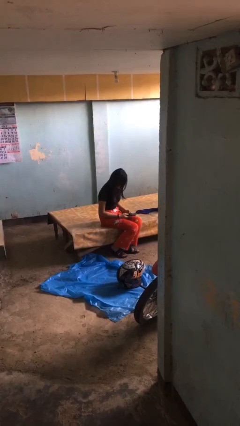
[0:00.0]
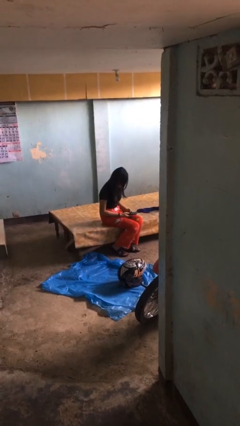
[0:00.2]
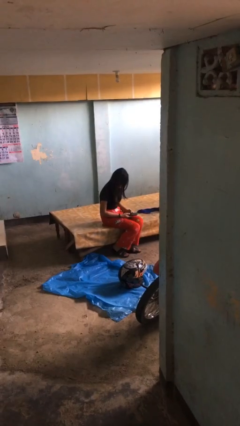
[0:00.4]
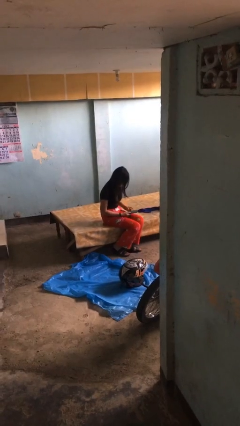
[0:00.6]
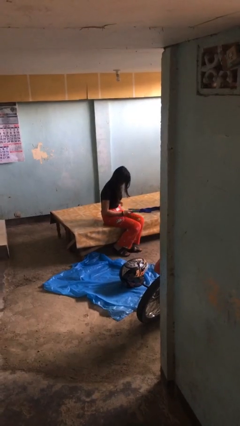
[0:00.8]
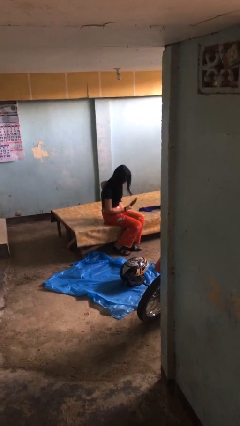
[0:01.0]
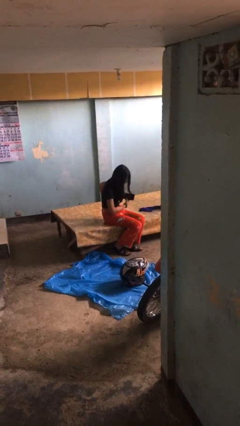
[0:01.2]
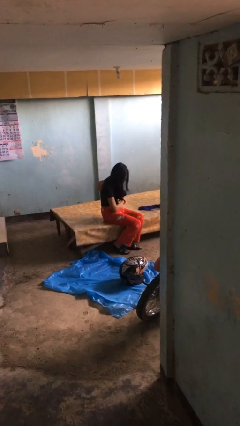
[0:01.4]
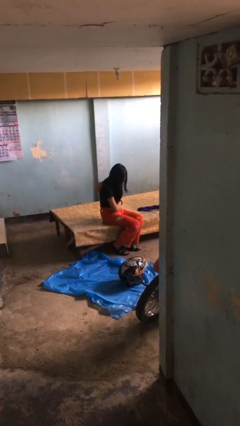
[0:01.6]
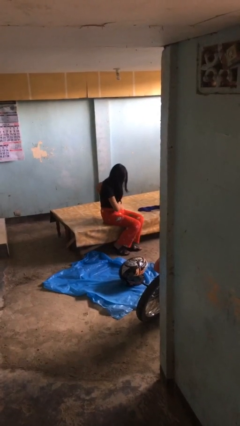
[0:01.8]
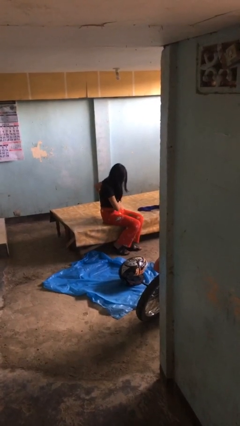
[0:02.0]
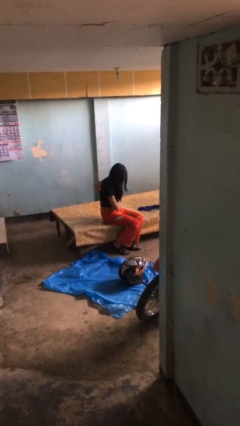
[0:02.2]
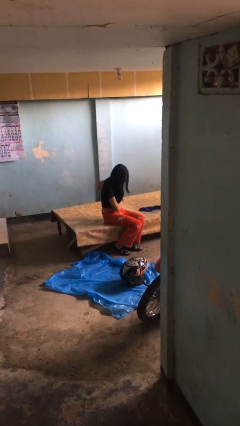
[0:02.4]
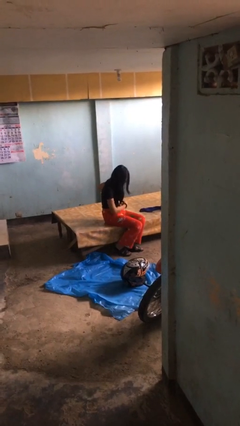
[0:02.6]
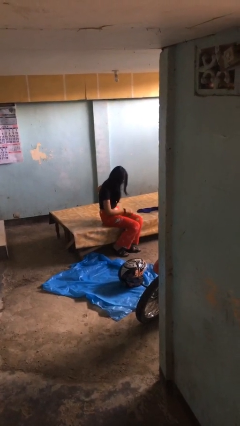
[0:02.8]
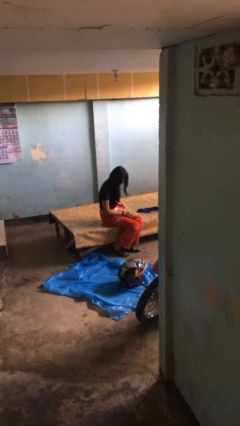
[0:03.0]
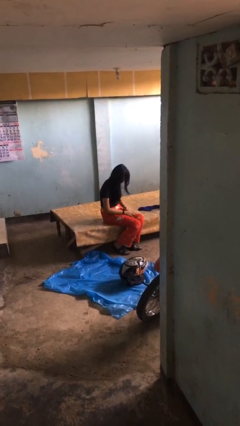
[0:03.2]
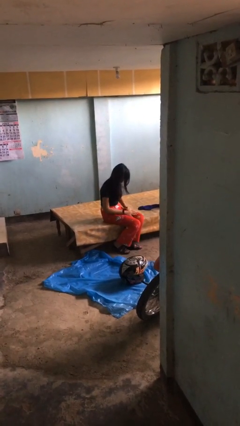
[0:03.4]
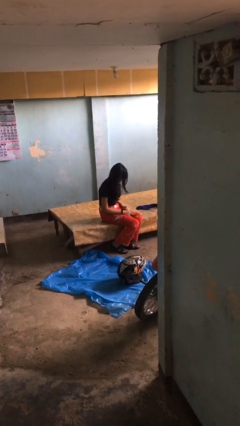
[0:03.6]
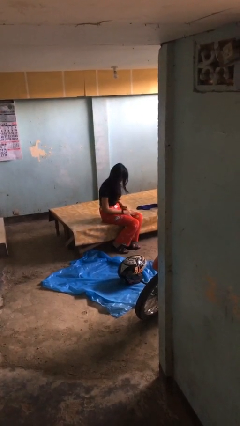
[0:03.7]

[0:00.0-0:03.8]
person puts phone into pocket

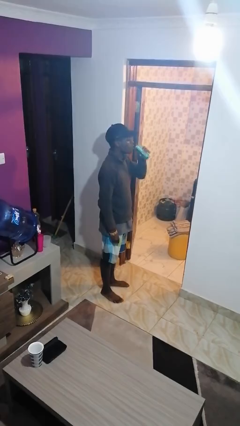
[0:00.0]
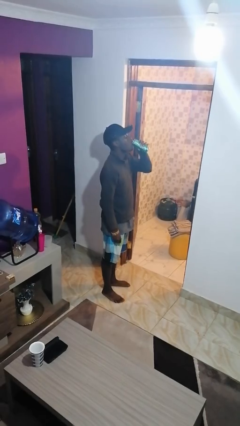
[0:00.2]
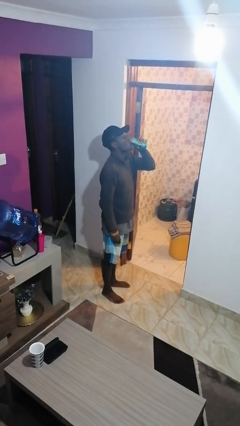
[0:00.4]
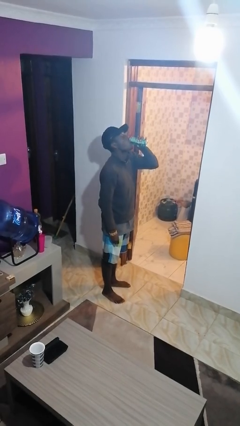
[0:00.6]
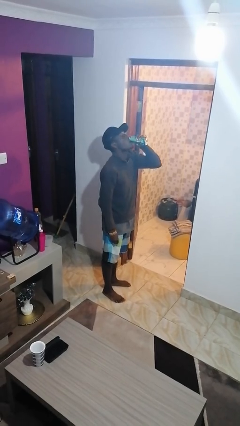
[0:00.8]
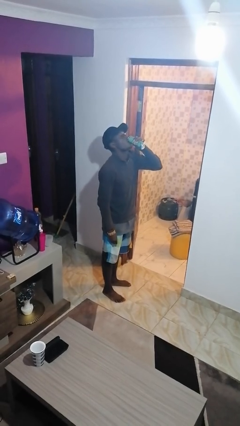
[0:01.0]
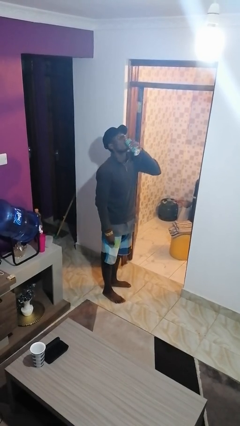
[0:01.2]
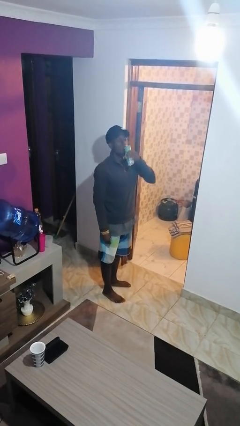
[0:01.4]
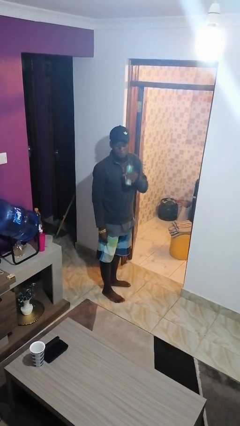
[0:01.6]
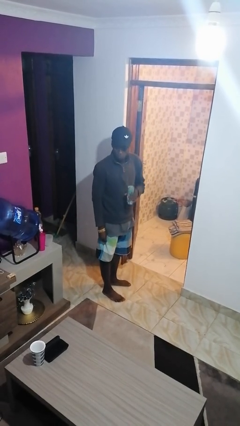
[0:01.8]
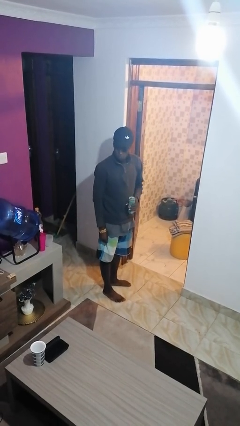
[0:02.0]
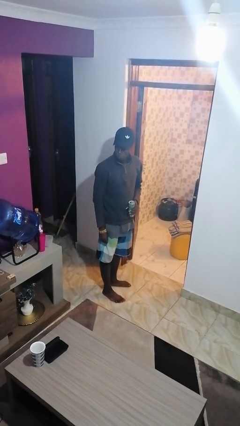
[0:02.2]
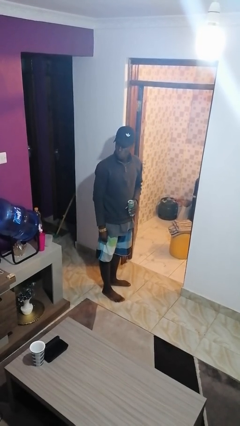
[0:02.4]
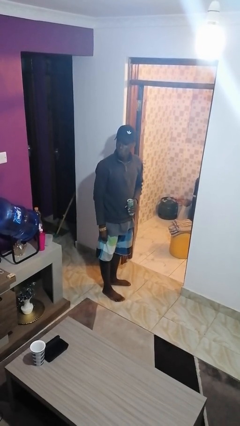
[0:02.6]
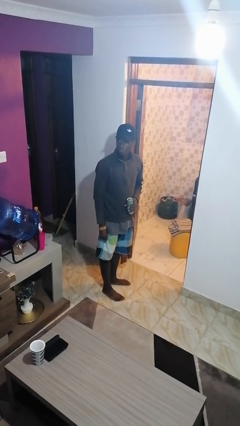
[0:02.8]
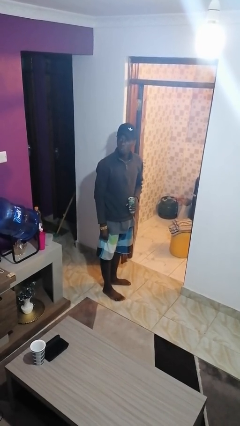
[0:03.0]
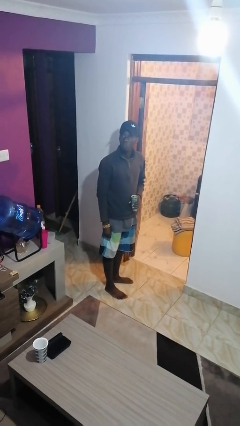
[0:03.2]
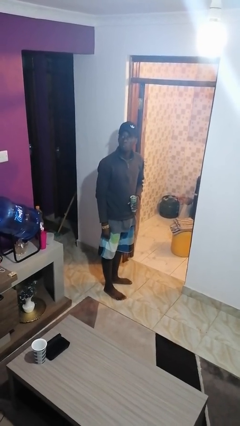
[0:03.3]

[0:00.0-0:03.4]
person drinks from beverage can

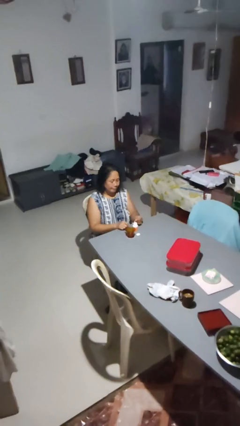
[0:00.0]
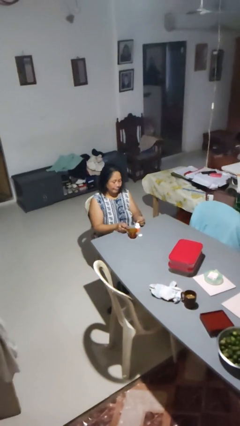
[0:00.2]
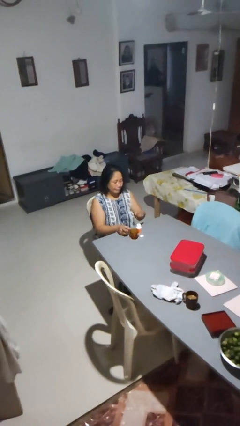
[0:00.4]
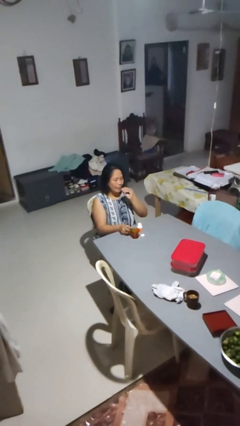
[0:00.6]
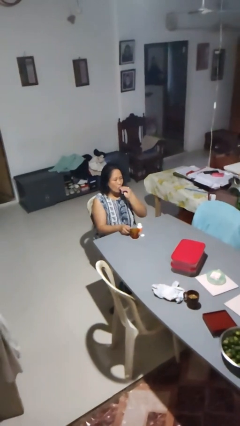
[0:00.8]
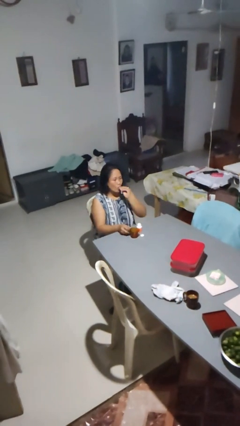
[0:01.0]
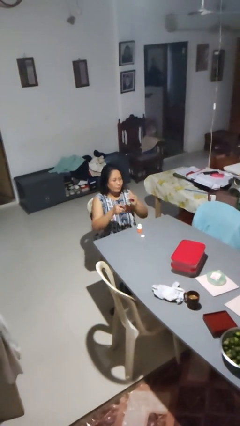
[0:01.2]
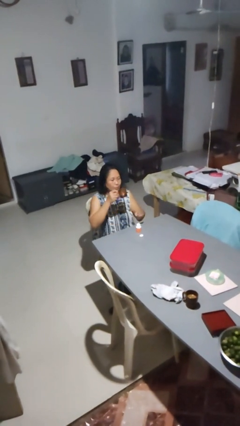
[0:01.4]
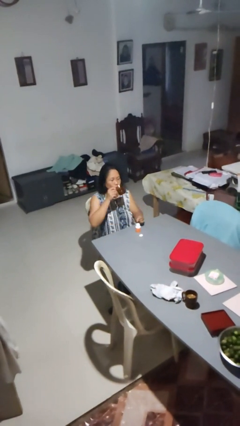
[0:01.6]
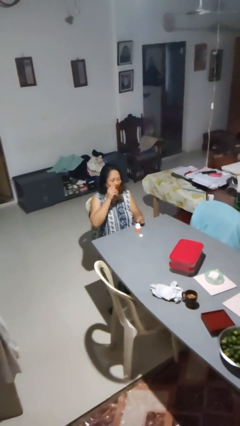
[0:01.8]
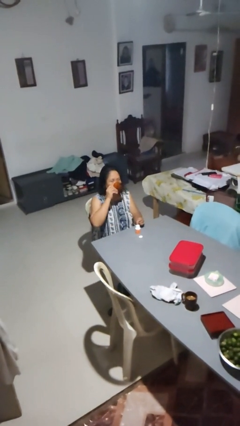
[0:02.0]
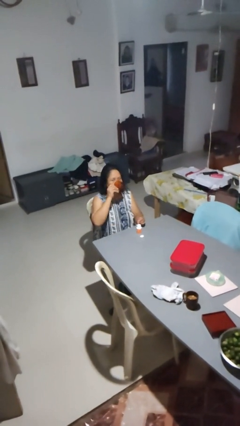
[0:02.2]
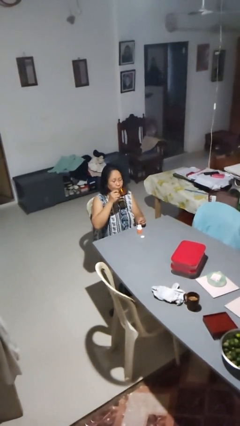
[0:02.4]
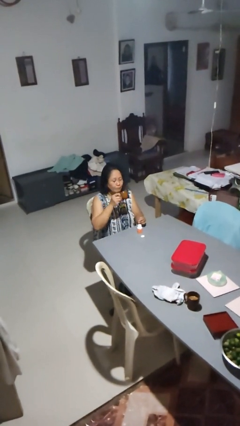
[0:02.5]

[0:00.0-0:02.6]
person drinks from cup

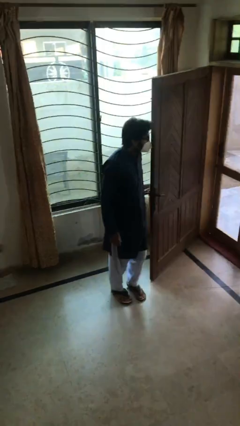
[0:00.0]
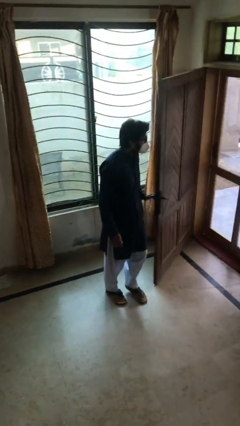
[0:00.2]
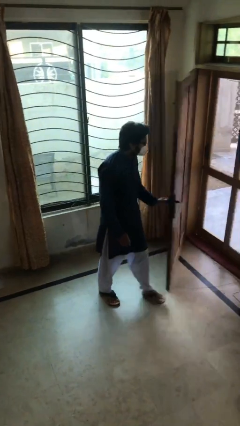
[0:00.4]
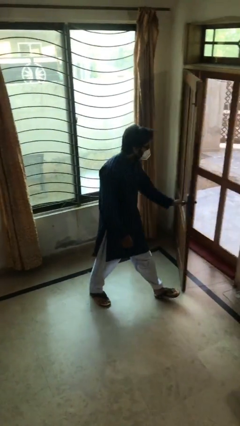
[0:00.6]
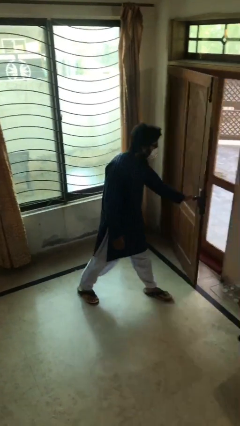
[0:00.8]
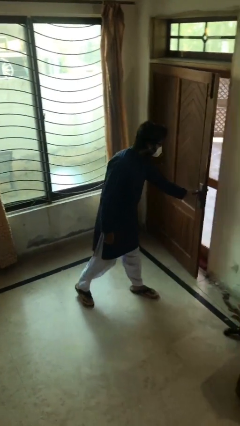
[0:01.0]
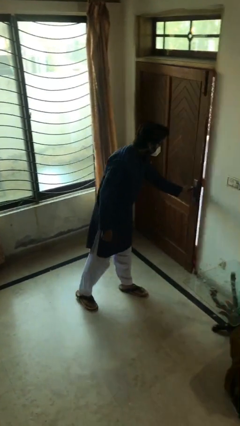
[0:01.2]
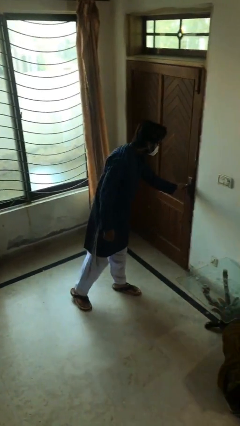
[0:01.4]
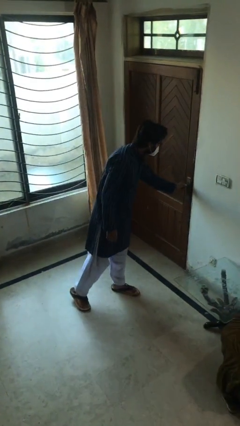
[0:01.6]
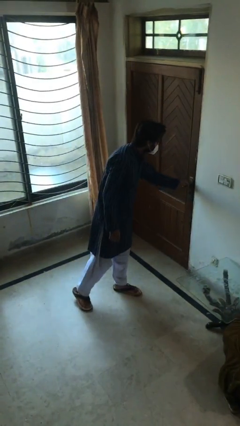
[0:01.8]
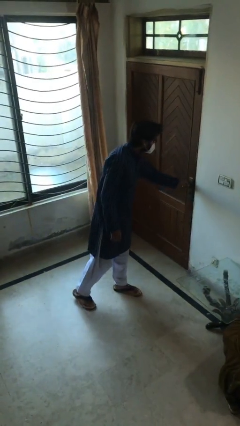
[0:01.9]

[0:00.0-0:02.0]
person closes facility door

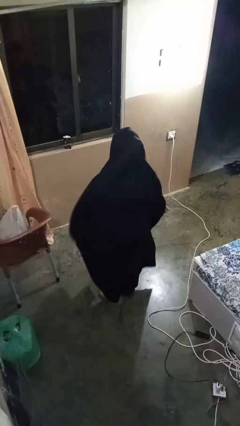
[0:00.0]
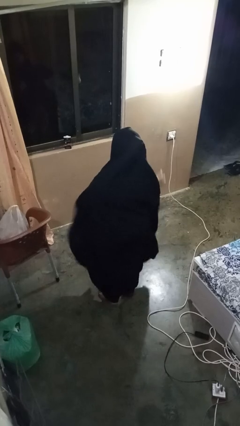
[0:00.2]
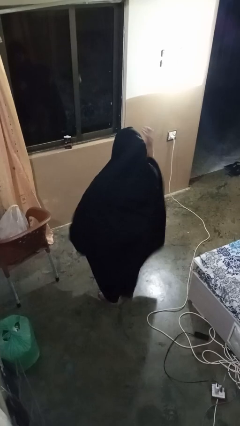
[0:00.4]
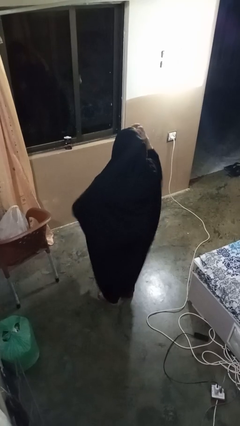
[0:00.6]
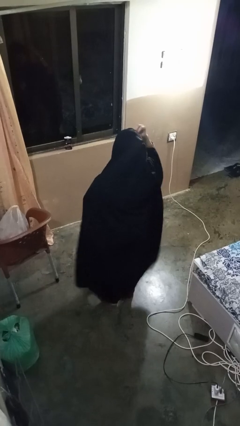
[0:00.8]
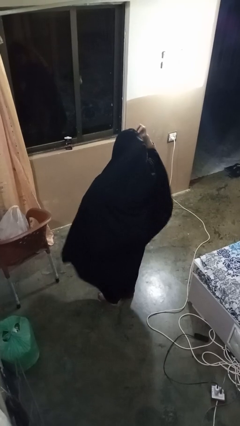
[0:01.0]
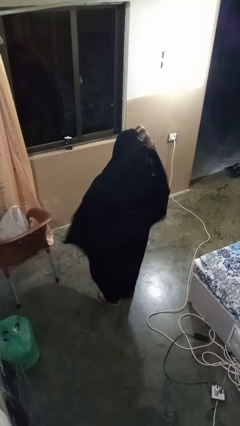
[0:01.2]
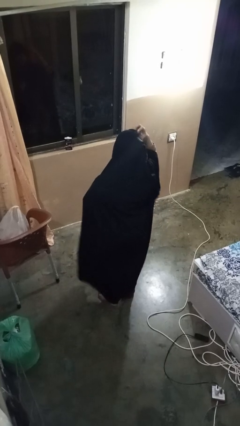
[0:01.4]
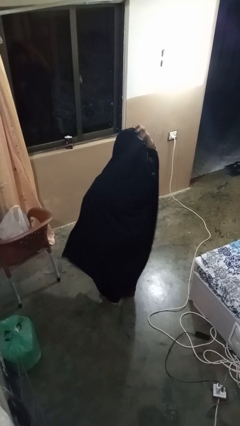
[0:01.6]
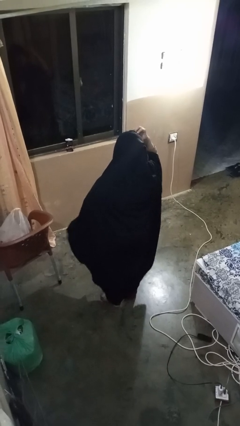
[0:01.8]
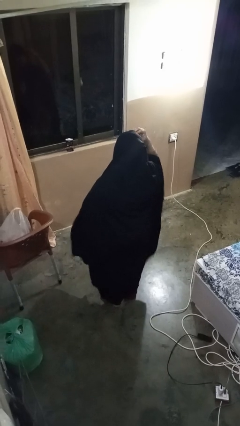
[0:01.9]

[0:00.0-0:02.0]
person scratches face

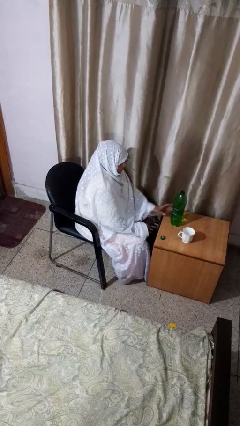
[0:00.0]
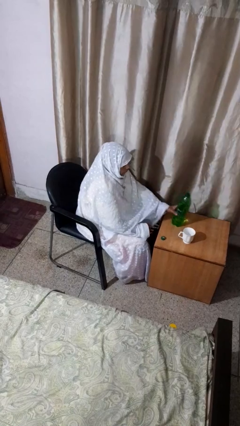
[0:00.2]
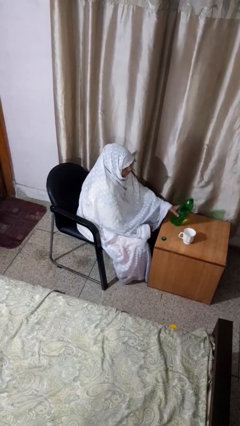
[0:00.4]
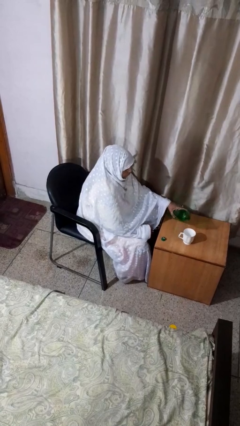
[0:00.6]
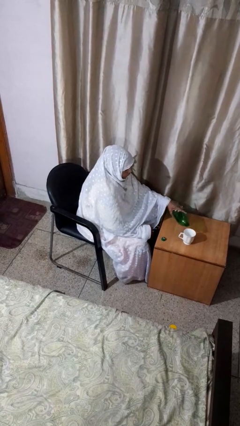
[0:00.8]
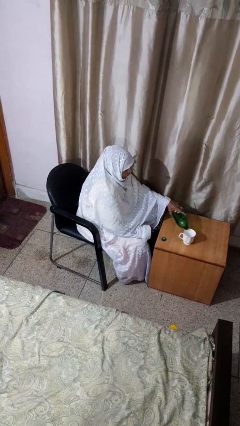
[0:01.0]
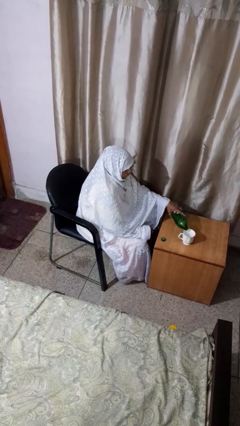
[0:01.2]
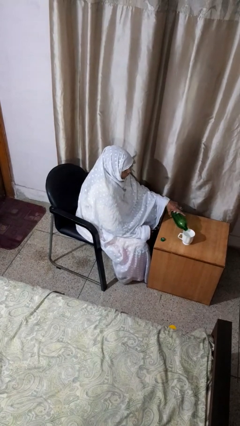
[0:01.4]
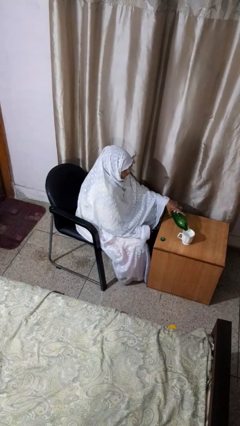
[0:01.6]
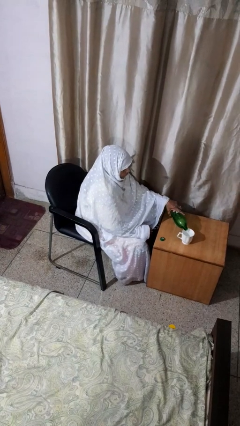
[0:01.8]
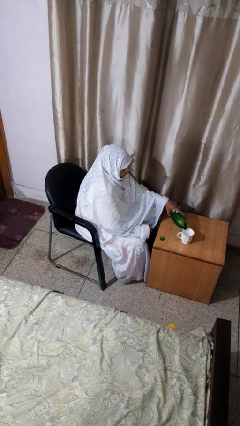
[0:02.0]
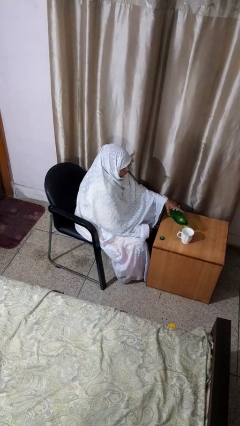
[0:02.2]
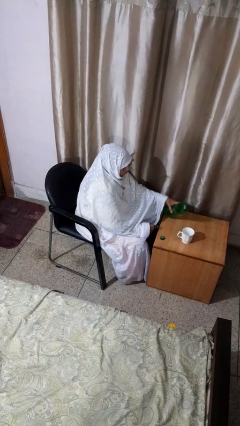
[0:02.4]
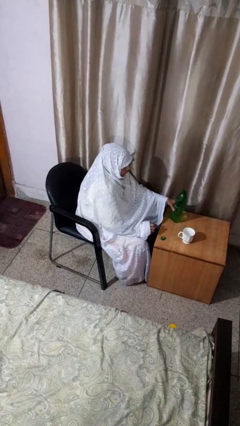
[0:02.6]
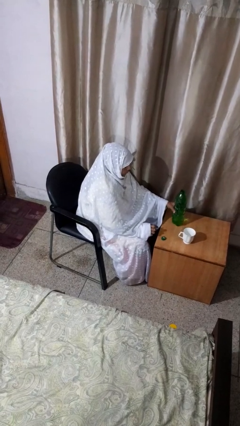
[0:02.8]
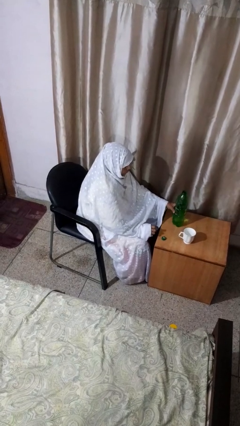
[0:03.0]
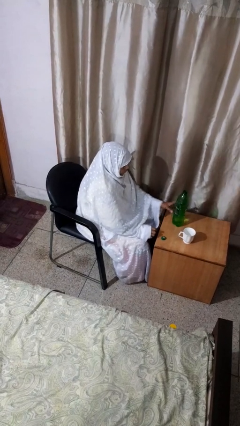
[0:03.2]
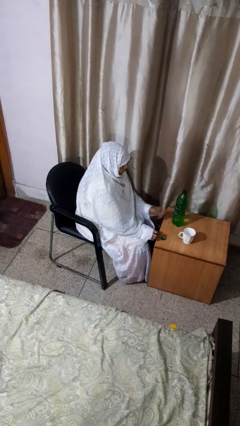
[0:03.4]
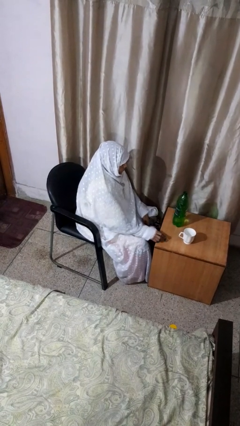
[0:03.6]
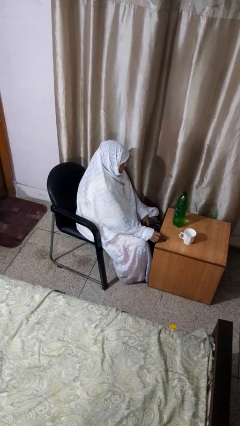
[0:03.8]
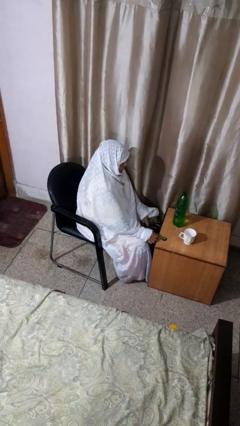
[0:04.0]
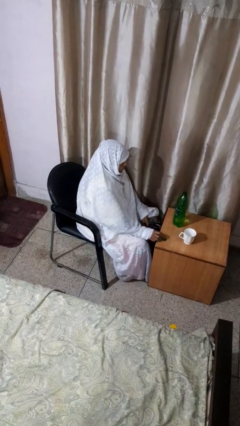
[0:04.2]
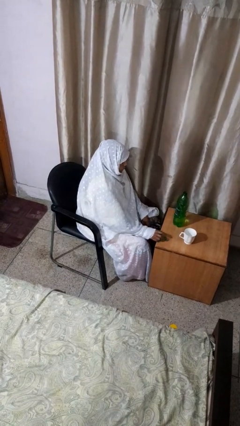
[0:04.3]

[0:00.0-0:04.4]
person pours liquid into cup
